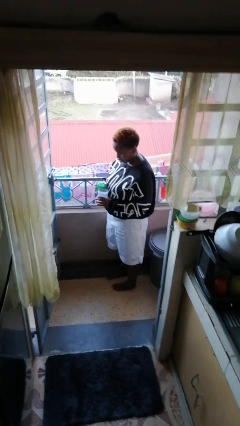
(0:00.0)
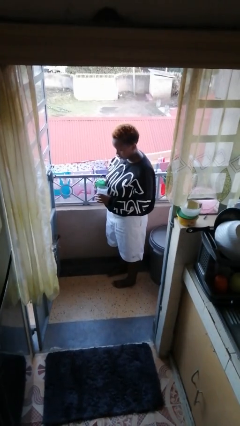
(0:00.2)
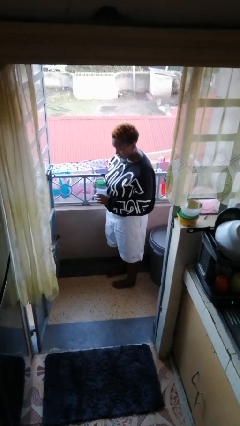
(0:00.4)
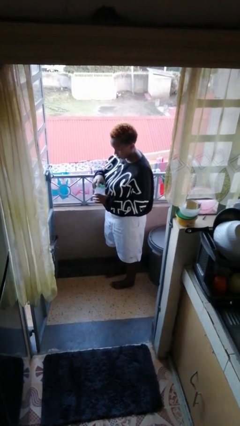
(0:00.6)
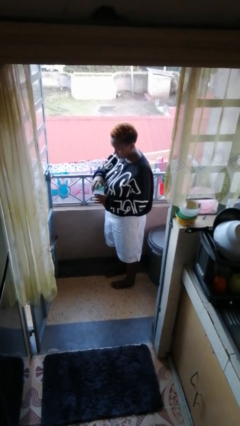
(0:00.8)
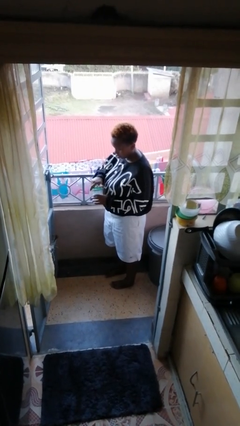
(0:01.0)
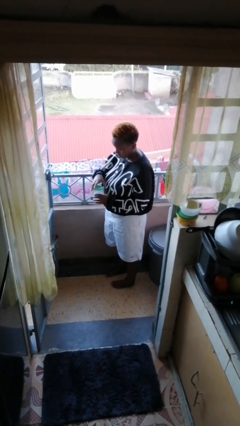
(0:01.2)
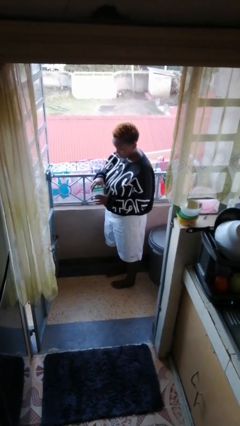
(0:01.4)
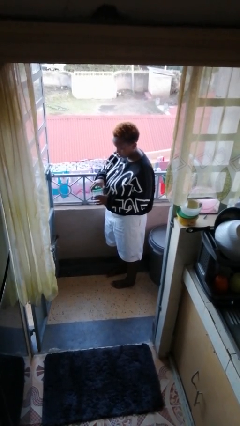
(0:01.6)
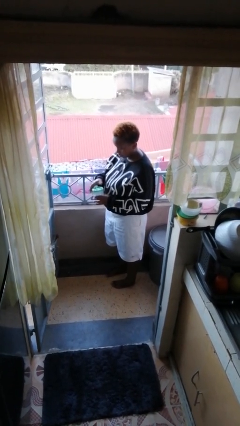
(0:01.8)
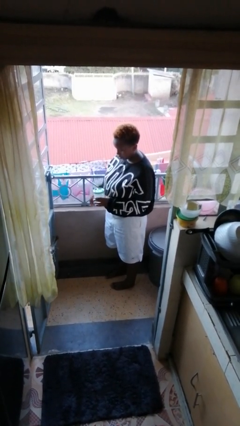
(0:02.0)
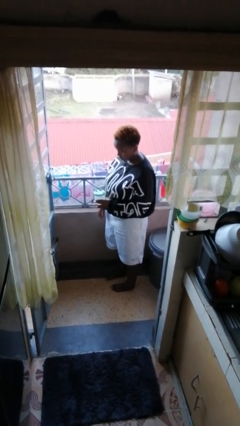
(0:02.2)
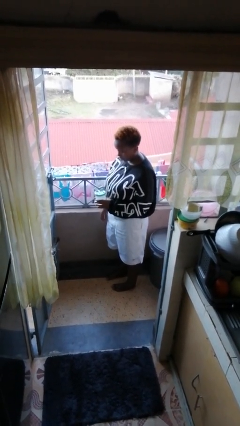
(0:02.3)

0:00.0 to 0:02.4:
person closes jar

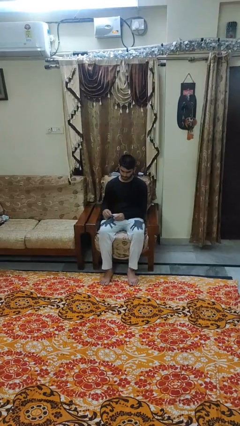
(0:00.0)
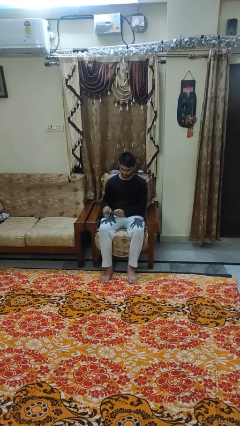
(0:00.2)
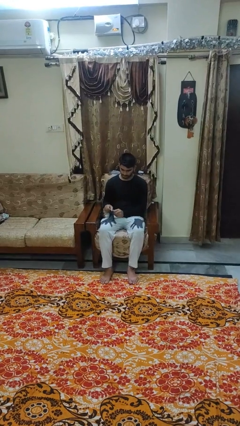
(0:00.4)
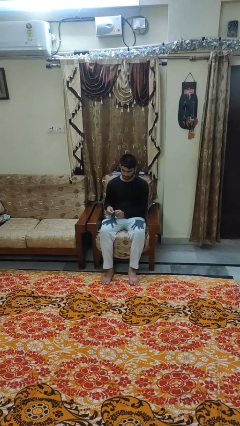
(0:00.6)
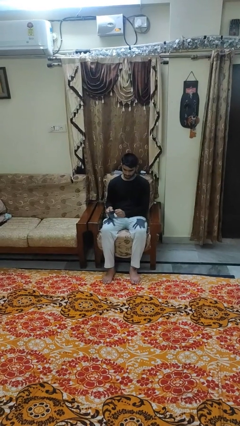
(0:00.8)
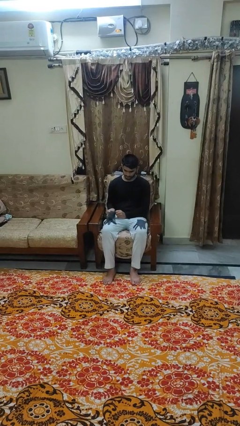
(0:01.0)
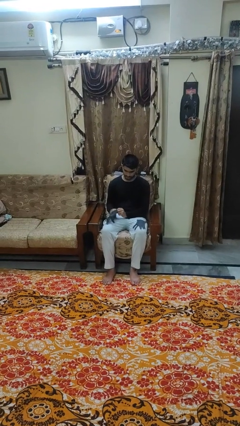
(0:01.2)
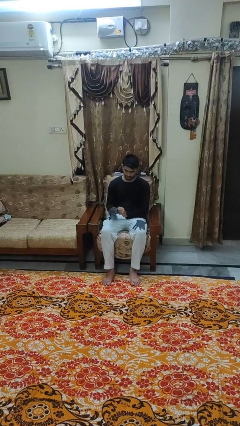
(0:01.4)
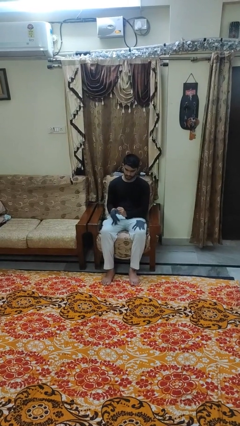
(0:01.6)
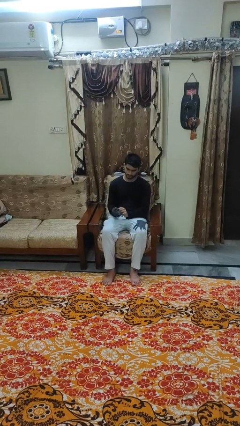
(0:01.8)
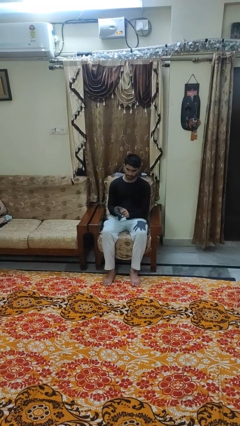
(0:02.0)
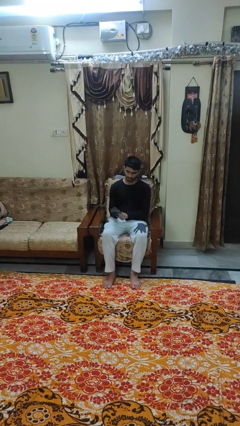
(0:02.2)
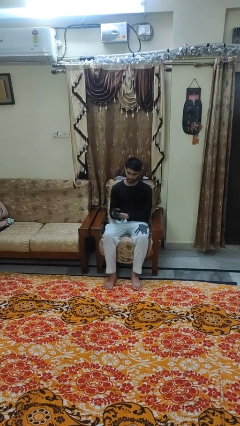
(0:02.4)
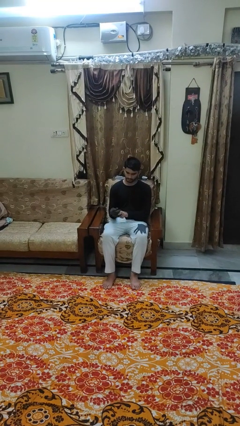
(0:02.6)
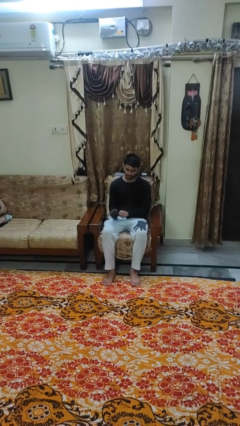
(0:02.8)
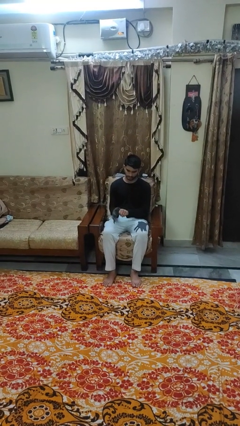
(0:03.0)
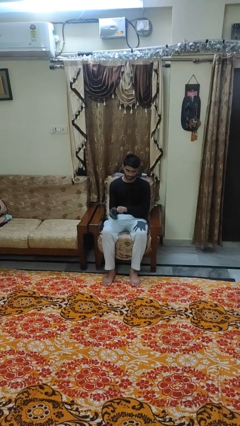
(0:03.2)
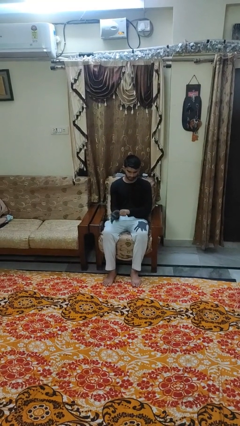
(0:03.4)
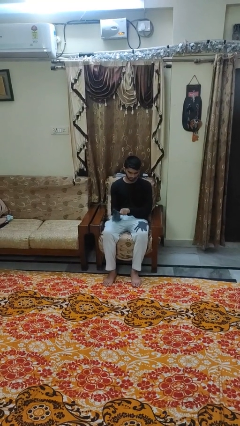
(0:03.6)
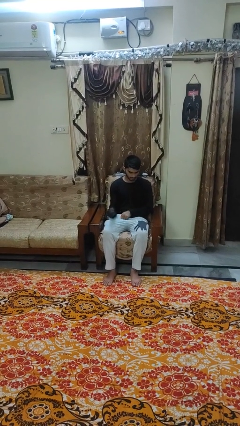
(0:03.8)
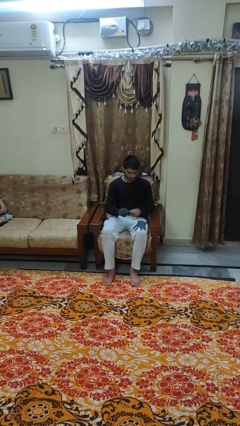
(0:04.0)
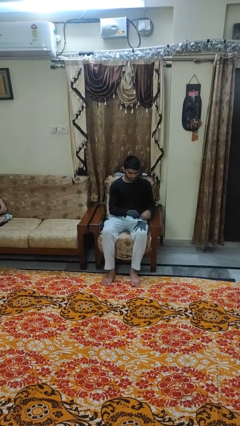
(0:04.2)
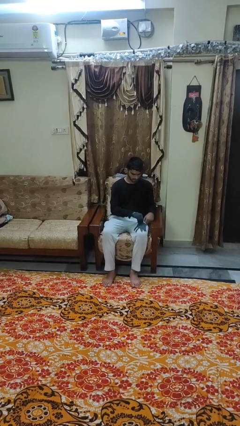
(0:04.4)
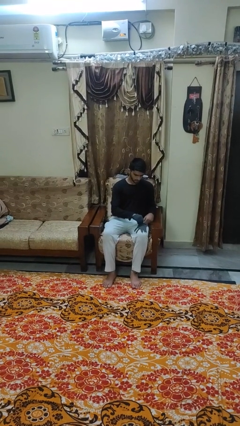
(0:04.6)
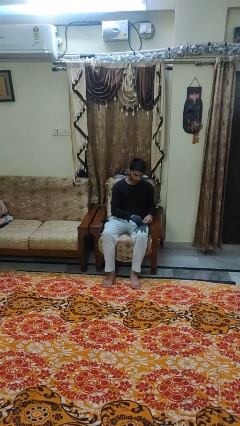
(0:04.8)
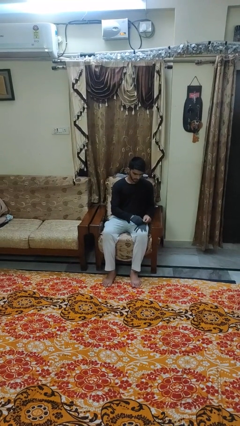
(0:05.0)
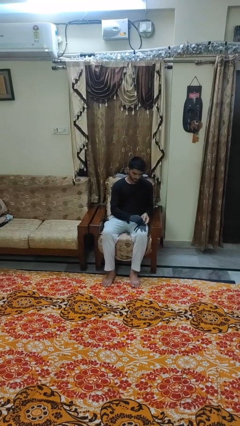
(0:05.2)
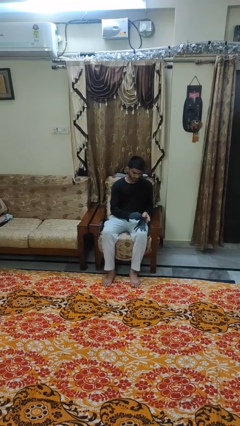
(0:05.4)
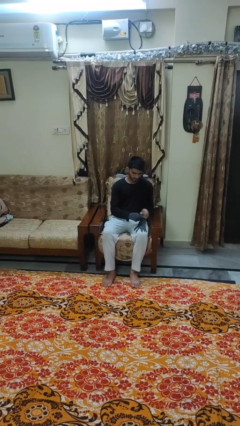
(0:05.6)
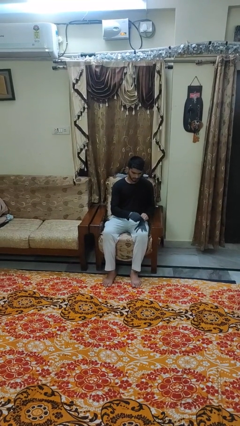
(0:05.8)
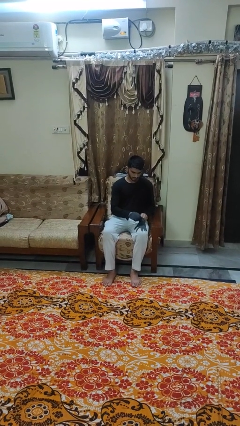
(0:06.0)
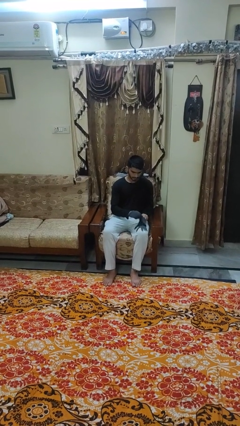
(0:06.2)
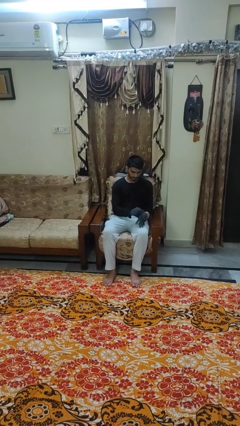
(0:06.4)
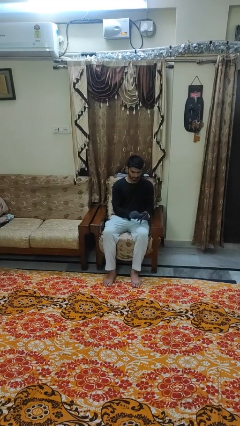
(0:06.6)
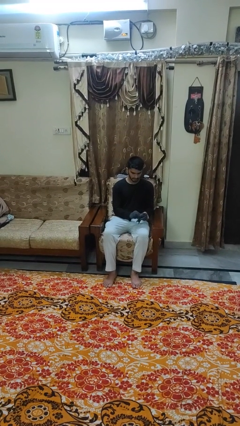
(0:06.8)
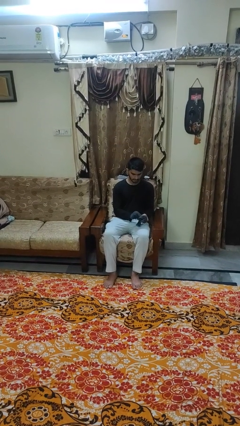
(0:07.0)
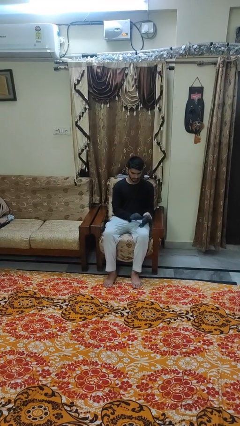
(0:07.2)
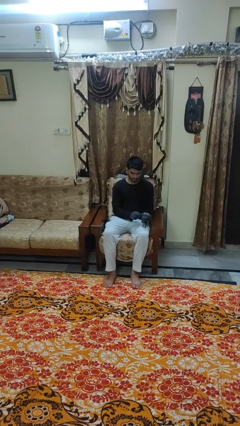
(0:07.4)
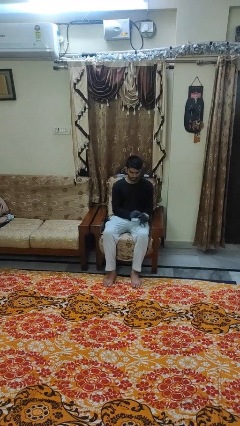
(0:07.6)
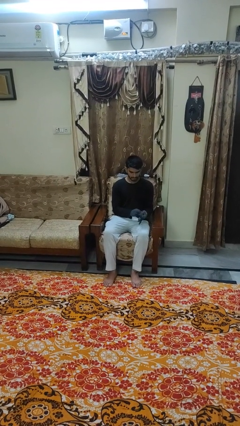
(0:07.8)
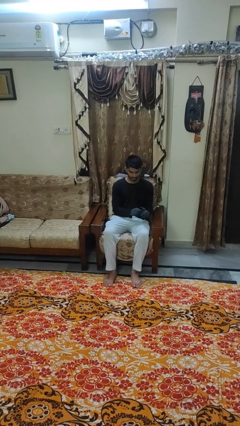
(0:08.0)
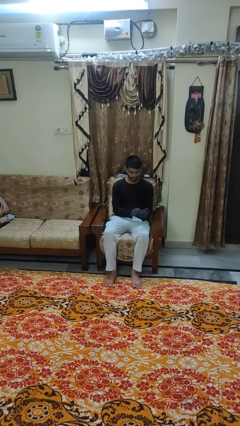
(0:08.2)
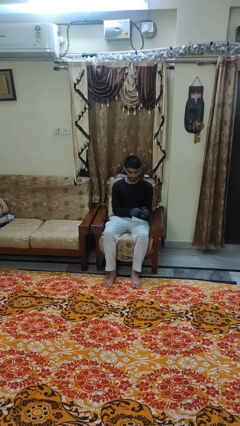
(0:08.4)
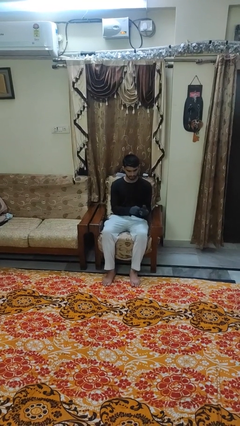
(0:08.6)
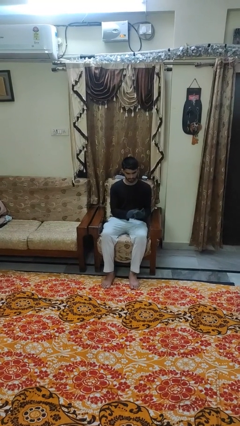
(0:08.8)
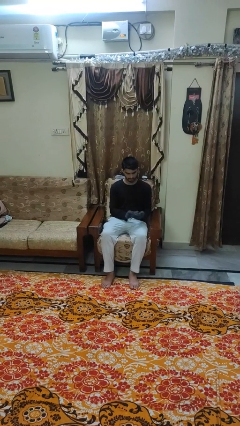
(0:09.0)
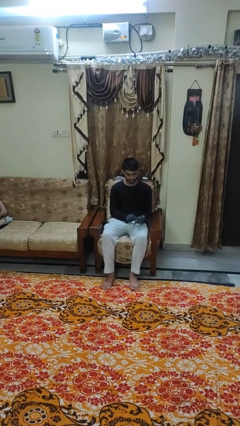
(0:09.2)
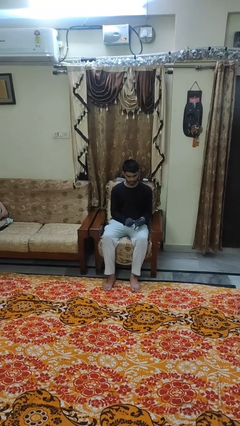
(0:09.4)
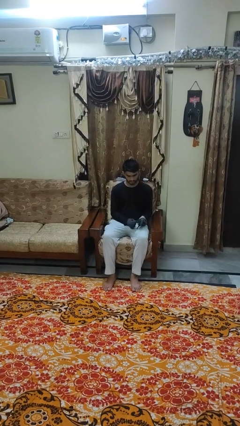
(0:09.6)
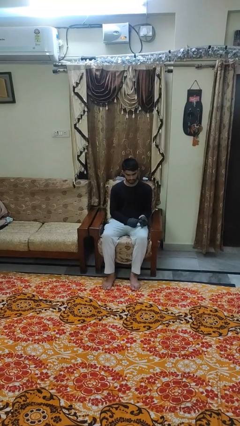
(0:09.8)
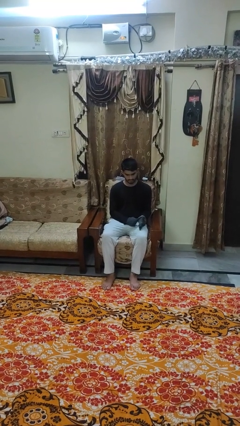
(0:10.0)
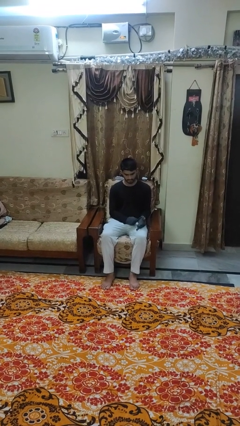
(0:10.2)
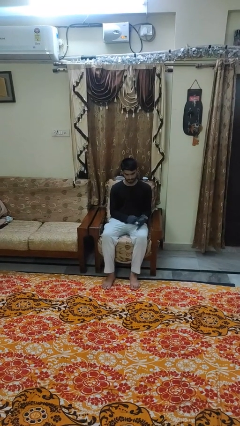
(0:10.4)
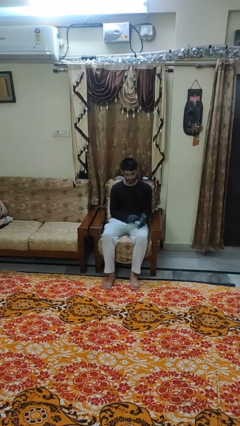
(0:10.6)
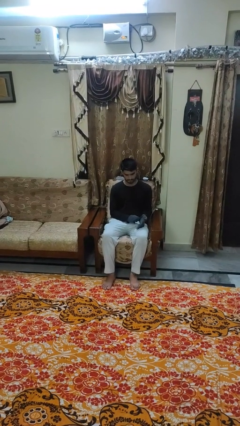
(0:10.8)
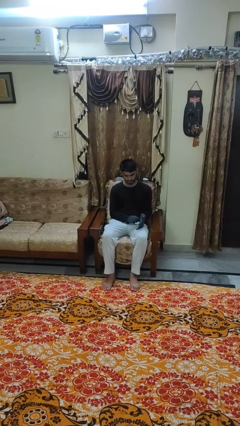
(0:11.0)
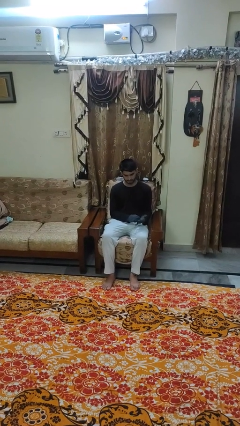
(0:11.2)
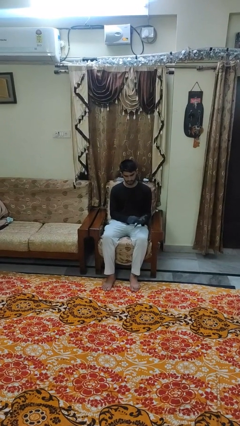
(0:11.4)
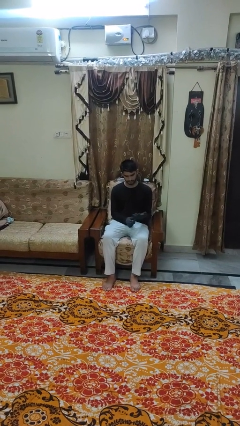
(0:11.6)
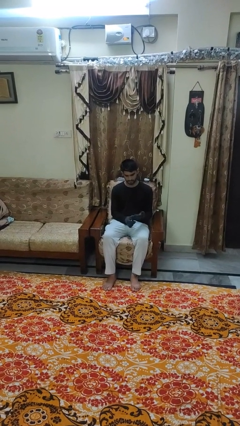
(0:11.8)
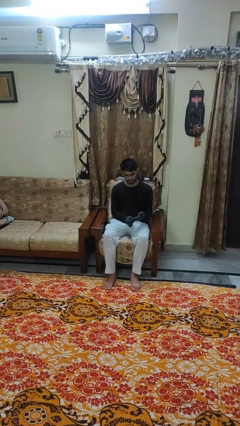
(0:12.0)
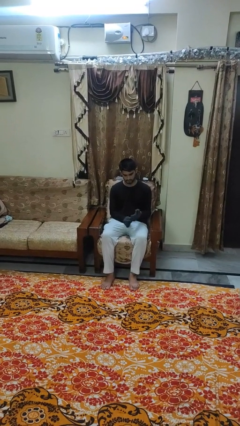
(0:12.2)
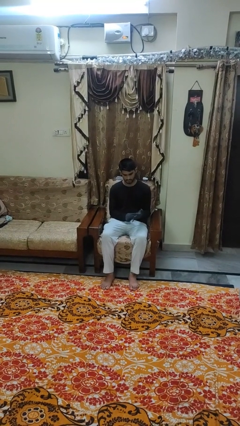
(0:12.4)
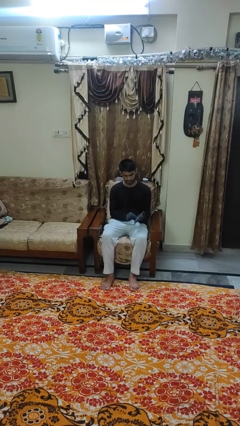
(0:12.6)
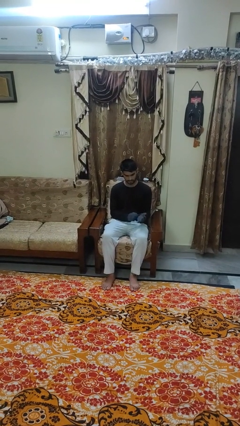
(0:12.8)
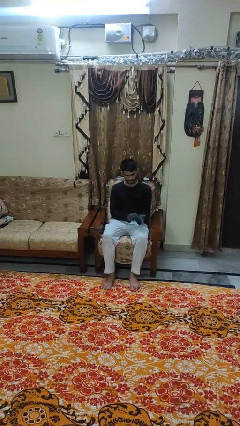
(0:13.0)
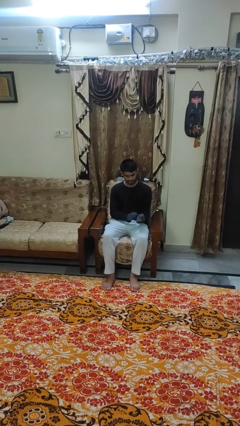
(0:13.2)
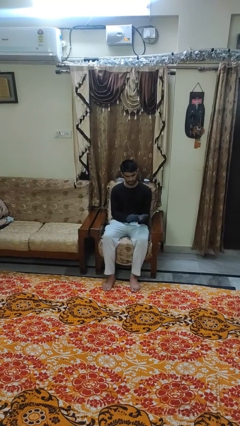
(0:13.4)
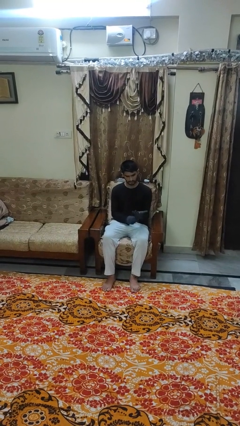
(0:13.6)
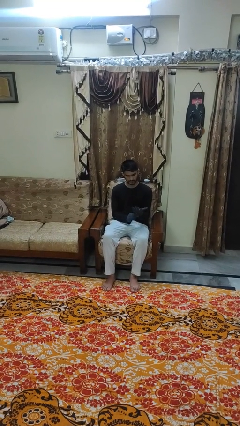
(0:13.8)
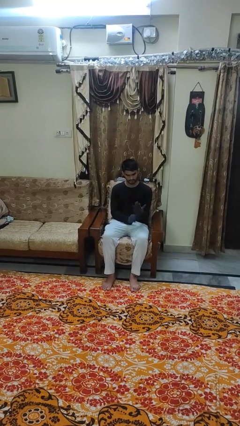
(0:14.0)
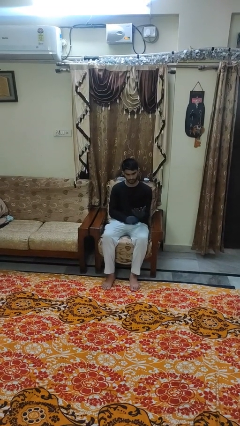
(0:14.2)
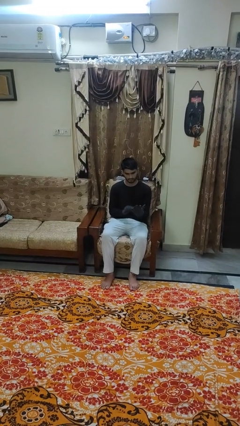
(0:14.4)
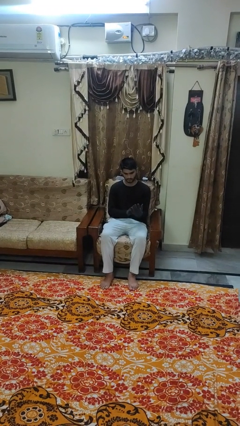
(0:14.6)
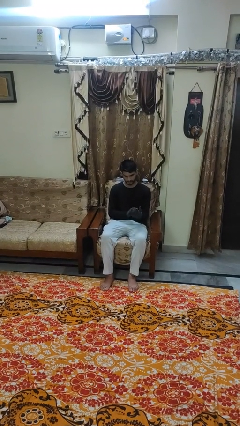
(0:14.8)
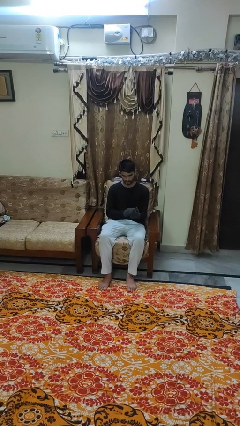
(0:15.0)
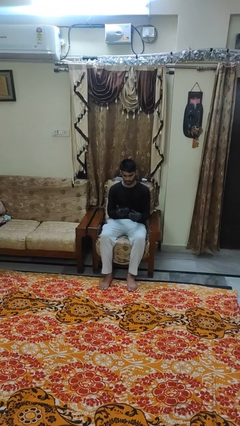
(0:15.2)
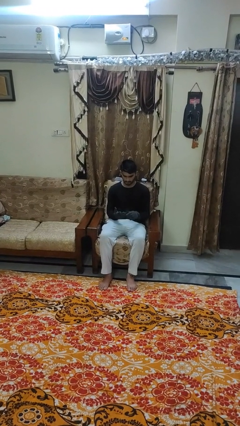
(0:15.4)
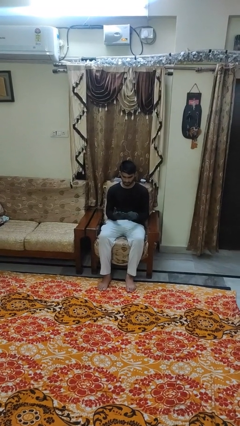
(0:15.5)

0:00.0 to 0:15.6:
person puts on gloves
